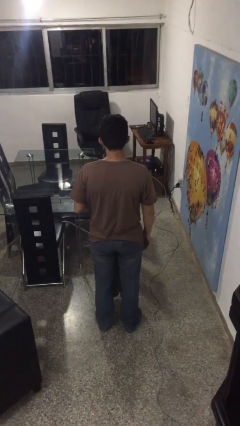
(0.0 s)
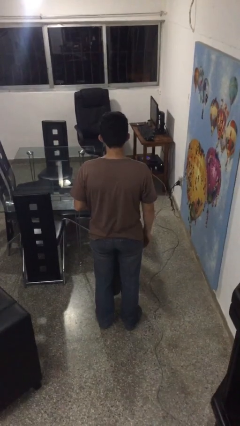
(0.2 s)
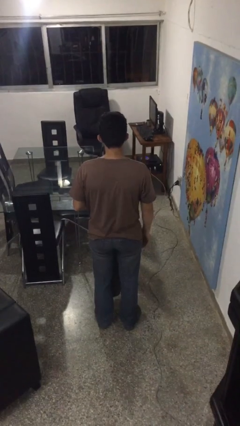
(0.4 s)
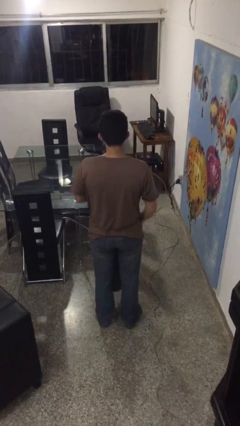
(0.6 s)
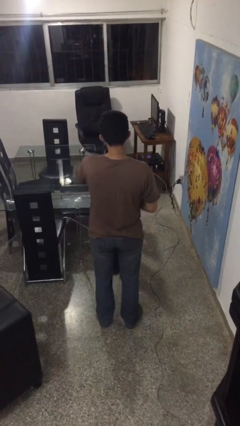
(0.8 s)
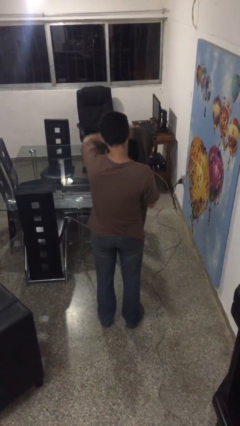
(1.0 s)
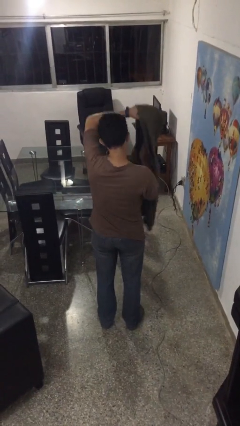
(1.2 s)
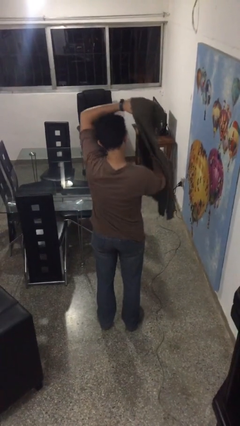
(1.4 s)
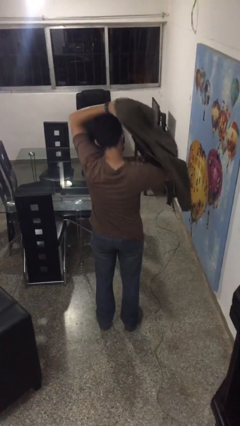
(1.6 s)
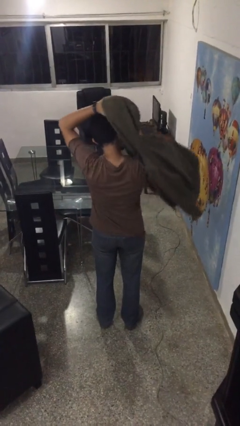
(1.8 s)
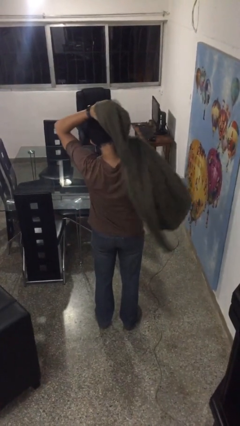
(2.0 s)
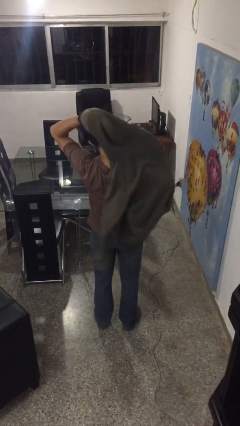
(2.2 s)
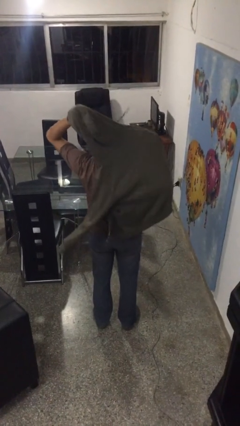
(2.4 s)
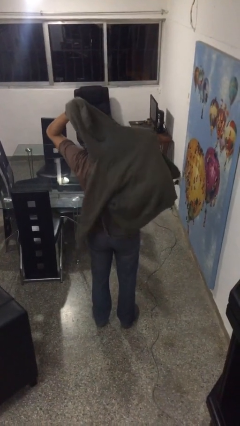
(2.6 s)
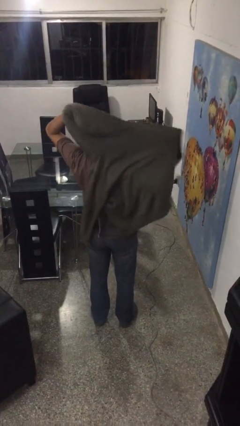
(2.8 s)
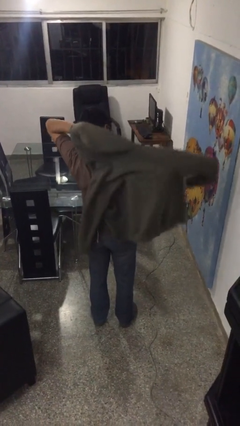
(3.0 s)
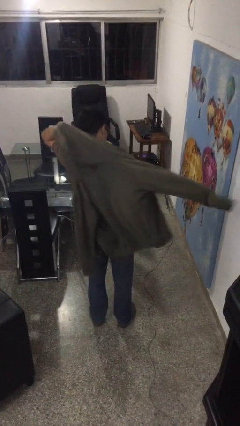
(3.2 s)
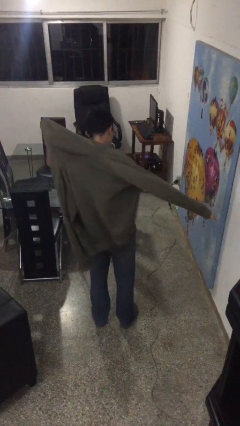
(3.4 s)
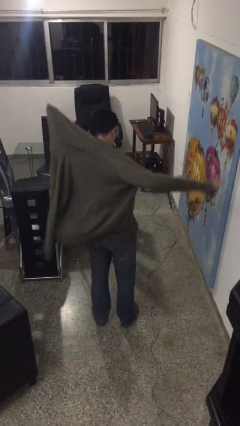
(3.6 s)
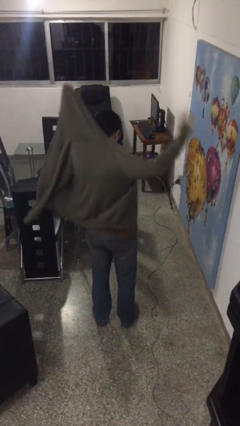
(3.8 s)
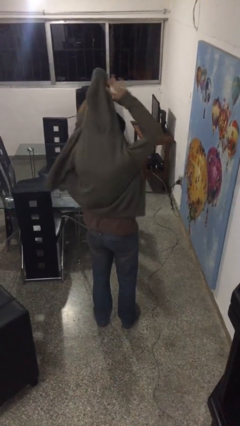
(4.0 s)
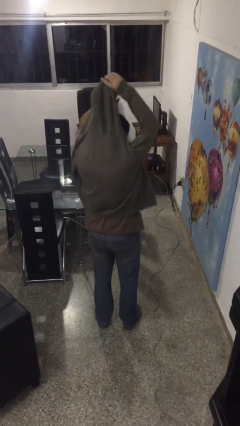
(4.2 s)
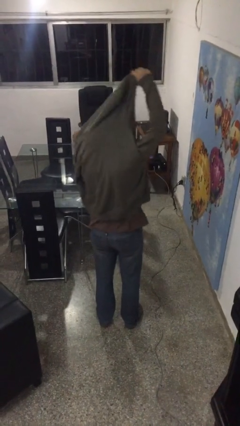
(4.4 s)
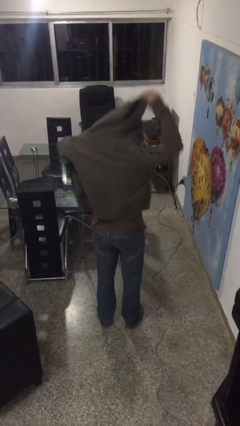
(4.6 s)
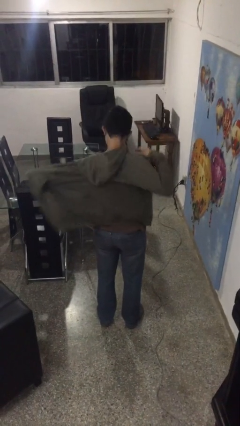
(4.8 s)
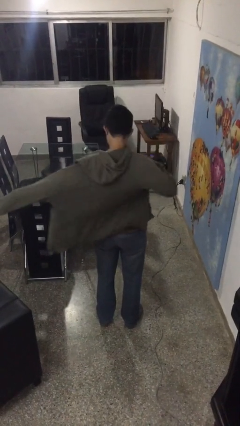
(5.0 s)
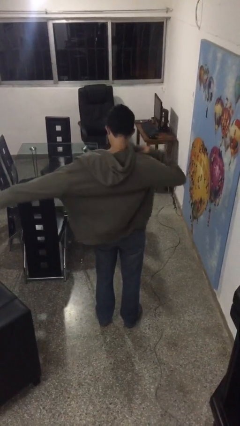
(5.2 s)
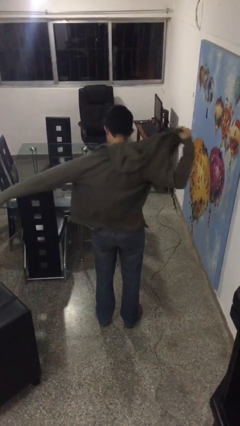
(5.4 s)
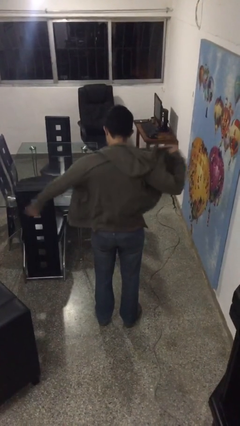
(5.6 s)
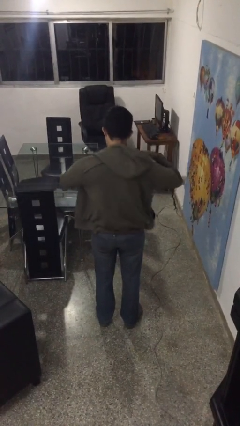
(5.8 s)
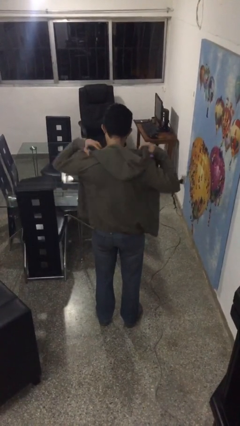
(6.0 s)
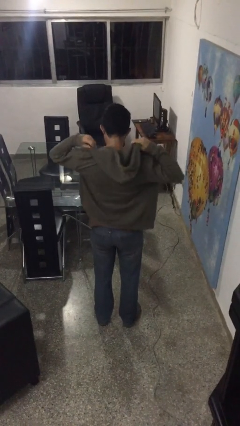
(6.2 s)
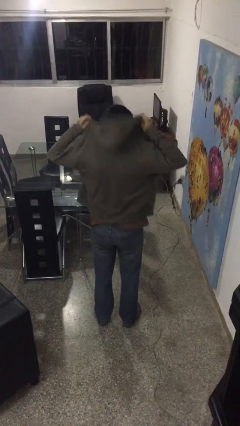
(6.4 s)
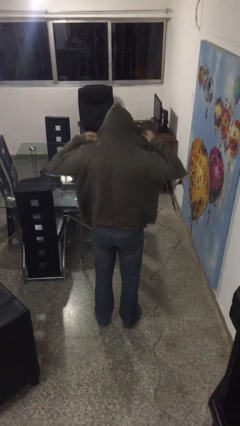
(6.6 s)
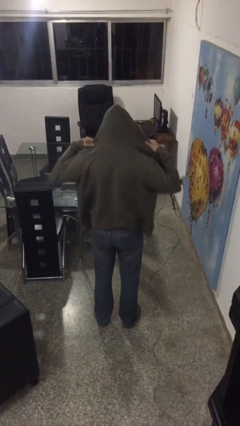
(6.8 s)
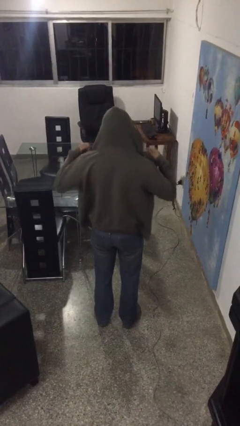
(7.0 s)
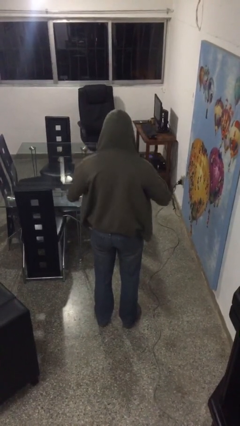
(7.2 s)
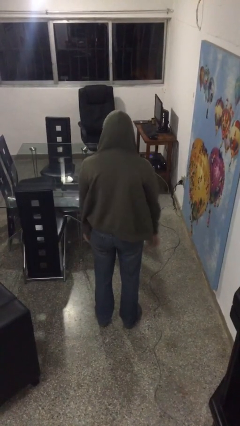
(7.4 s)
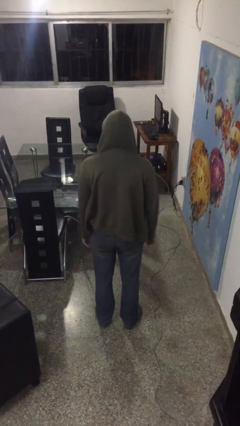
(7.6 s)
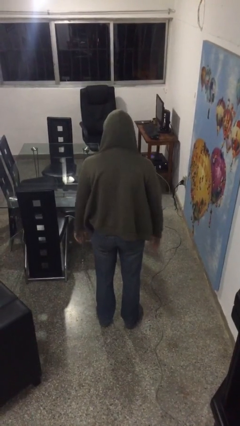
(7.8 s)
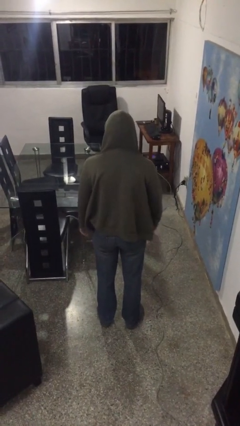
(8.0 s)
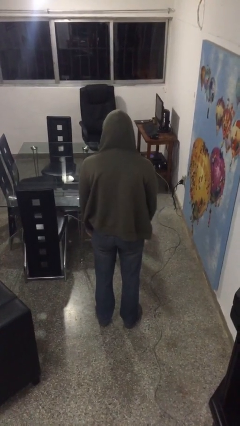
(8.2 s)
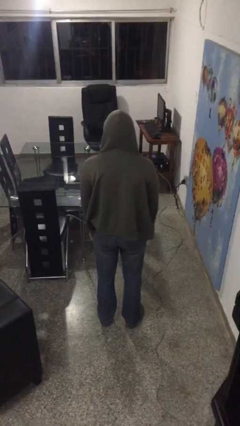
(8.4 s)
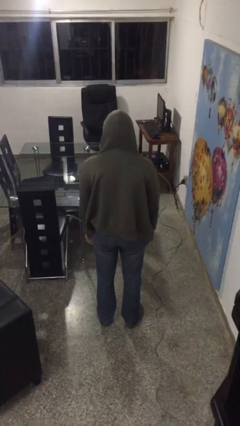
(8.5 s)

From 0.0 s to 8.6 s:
person puts on hoodie

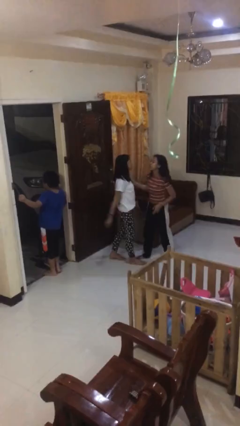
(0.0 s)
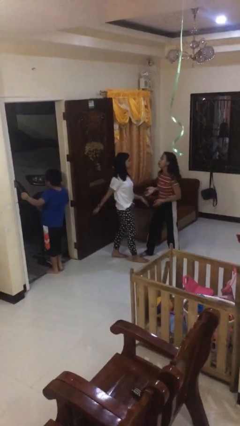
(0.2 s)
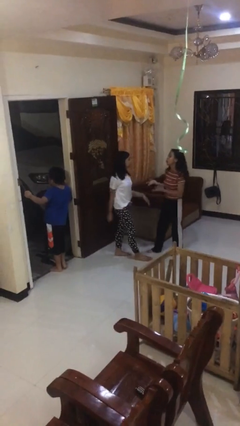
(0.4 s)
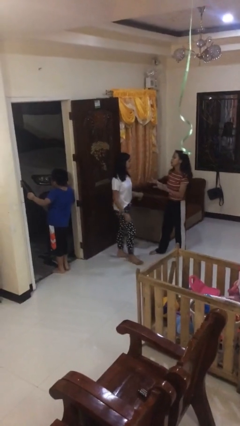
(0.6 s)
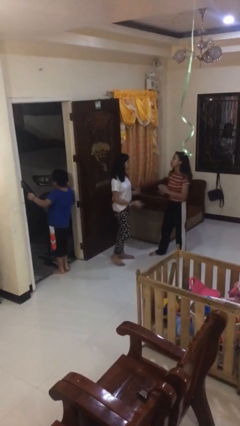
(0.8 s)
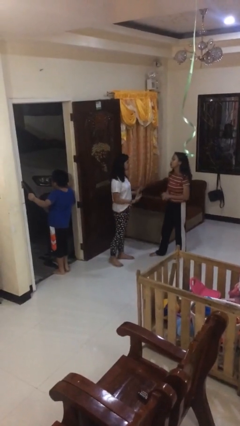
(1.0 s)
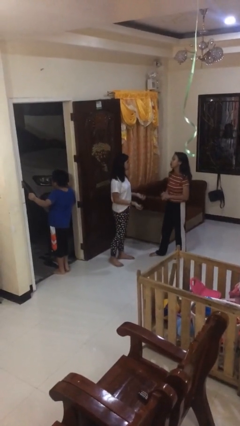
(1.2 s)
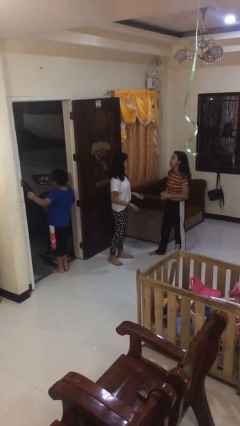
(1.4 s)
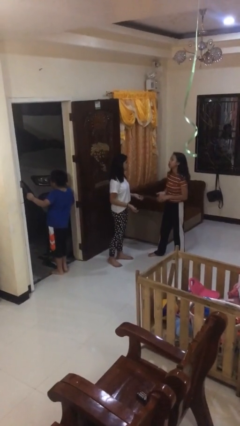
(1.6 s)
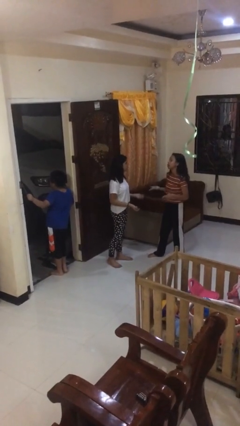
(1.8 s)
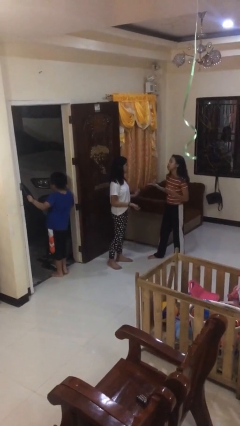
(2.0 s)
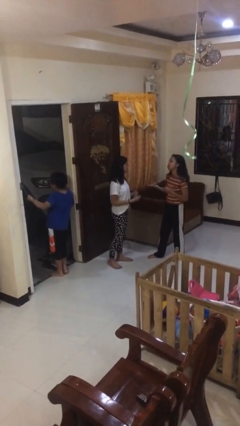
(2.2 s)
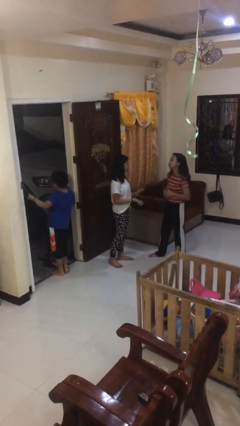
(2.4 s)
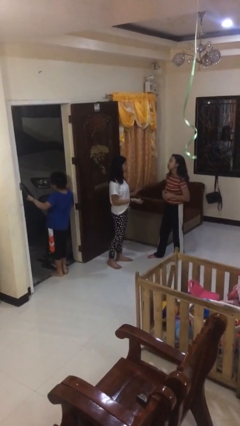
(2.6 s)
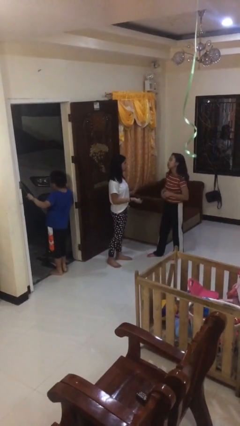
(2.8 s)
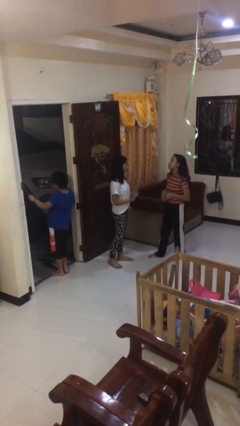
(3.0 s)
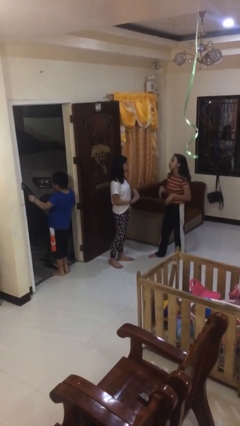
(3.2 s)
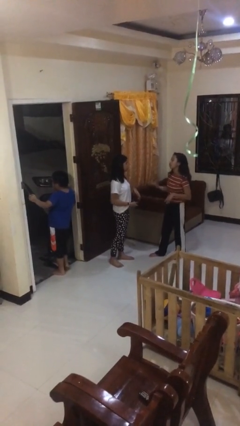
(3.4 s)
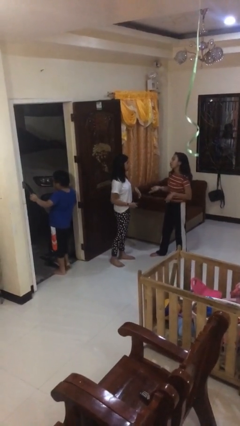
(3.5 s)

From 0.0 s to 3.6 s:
person talks to person

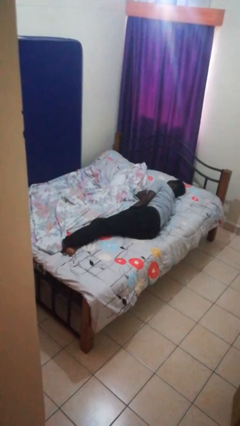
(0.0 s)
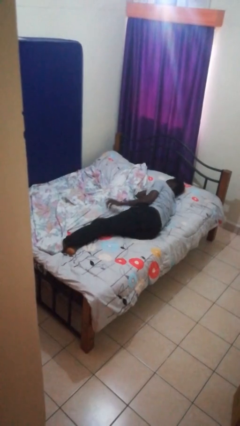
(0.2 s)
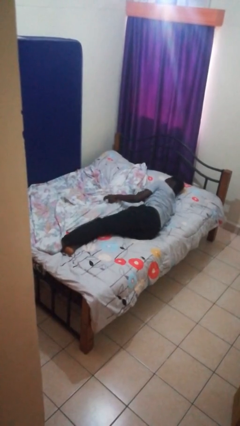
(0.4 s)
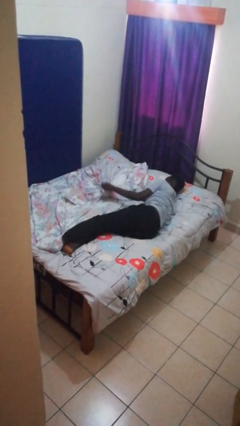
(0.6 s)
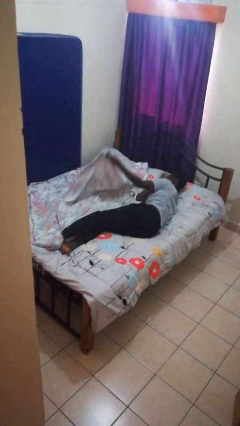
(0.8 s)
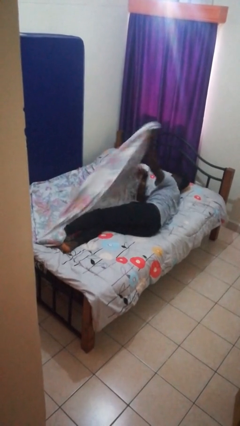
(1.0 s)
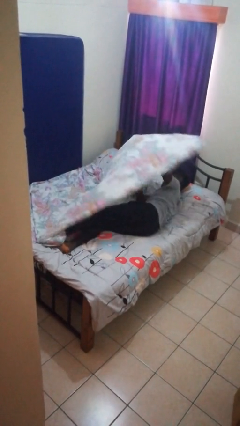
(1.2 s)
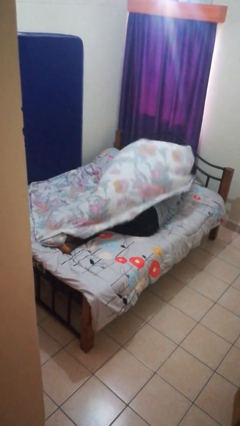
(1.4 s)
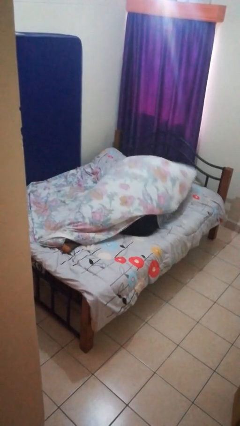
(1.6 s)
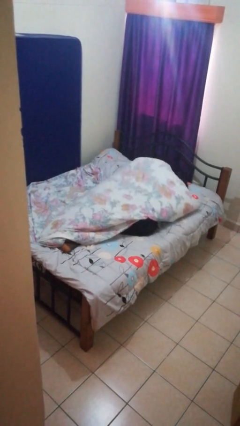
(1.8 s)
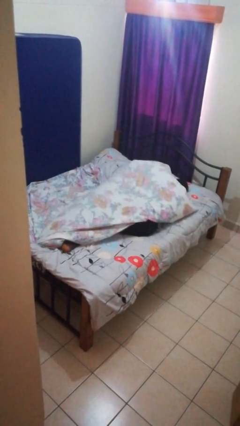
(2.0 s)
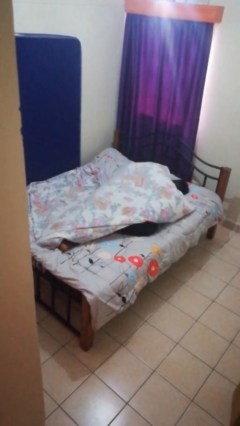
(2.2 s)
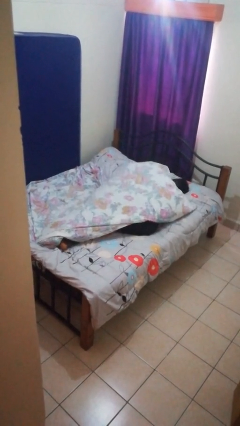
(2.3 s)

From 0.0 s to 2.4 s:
person covers with bedsheets

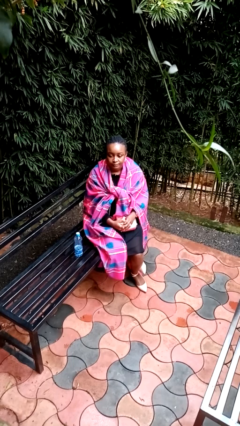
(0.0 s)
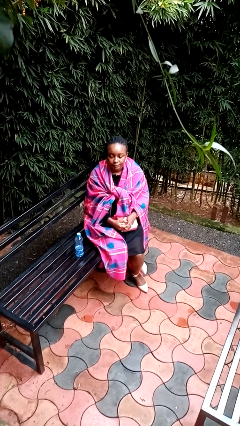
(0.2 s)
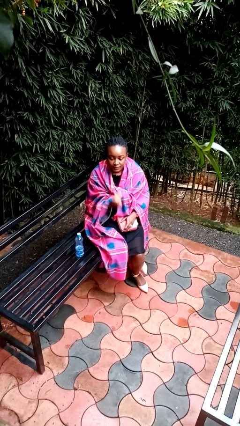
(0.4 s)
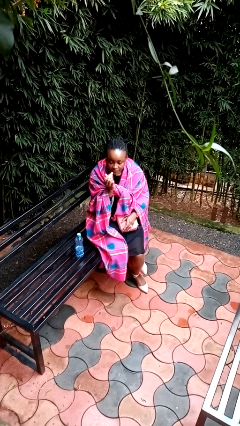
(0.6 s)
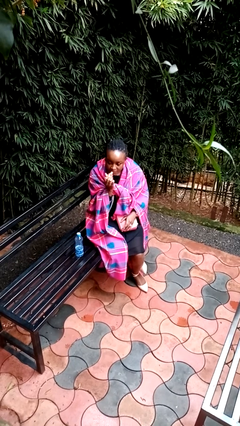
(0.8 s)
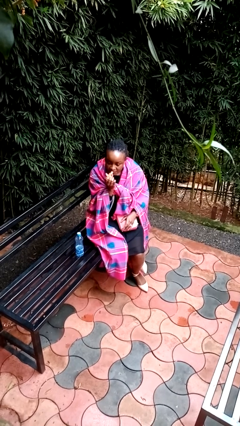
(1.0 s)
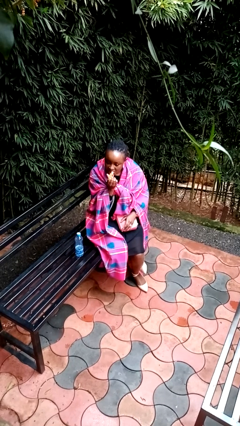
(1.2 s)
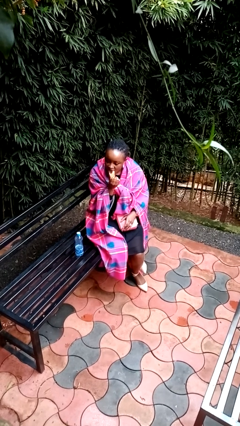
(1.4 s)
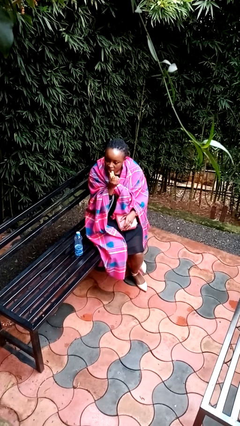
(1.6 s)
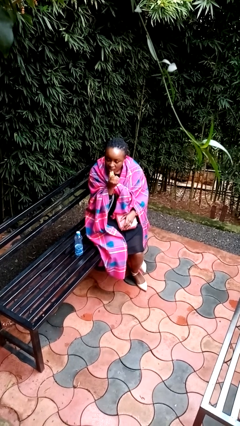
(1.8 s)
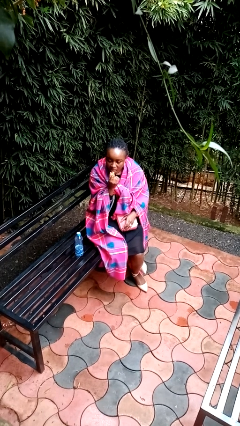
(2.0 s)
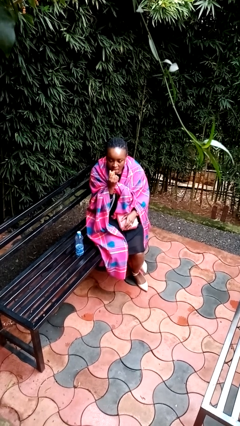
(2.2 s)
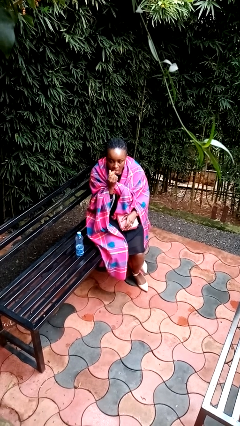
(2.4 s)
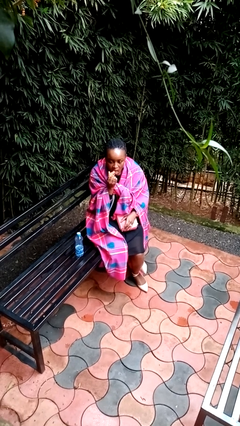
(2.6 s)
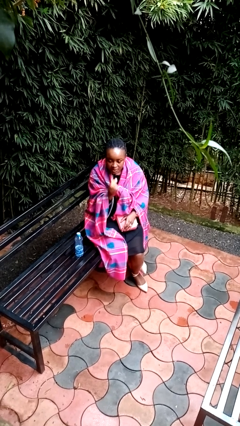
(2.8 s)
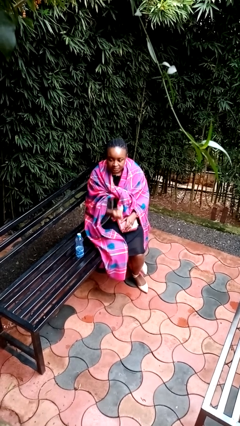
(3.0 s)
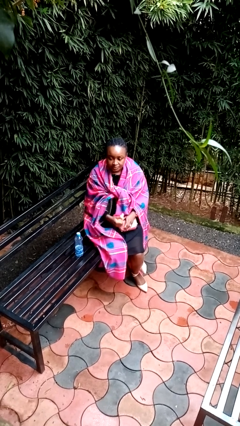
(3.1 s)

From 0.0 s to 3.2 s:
person applies lip makeup
